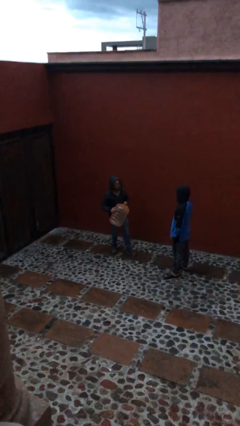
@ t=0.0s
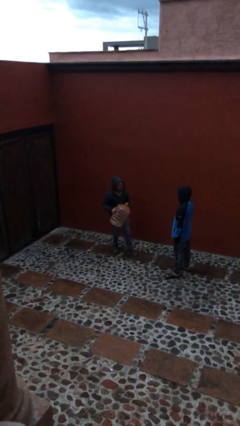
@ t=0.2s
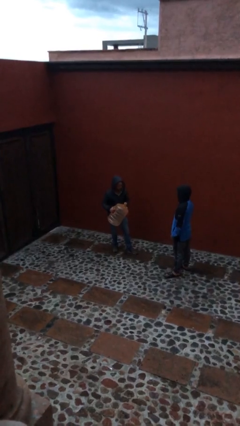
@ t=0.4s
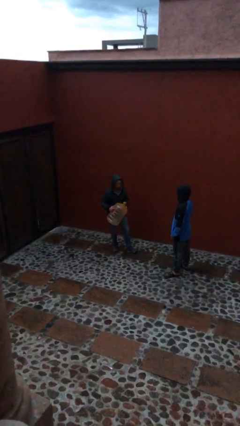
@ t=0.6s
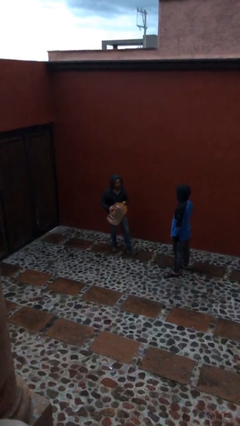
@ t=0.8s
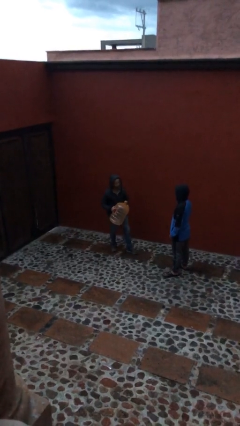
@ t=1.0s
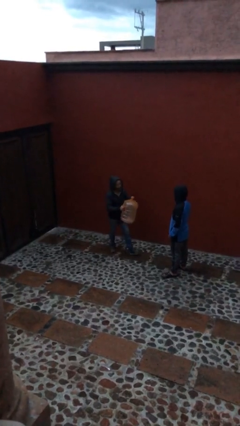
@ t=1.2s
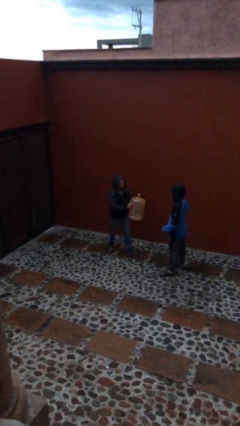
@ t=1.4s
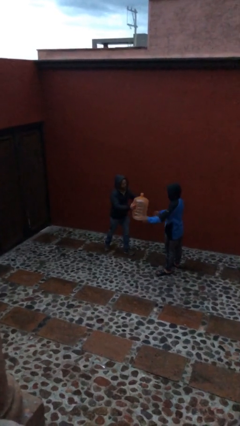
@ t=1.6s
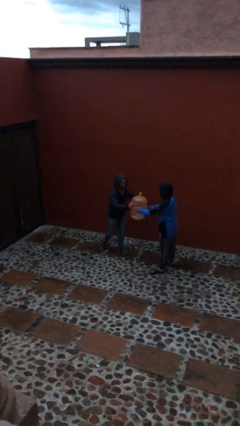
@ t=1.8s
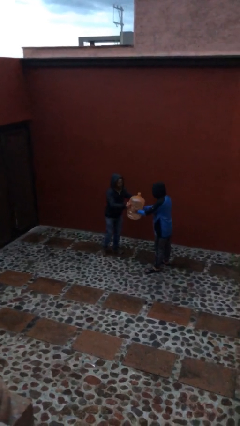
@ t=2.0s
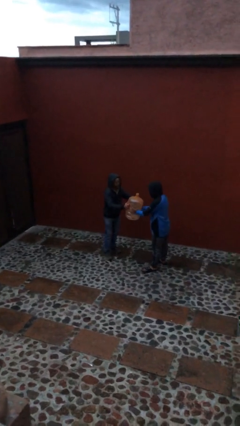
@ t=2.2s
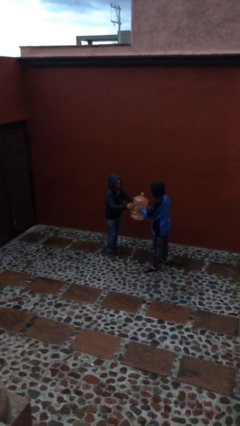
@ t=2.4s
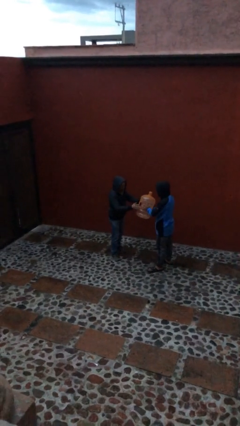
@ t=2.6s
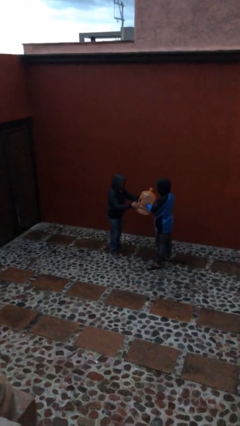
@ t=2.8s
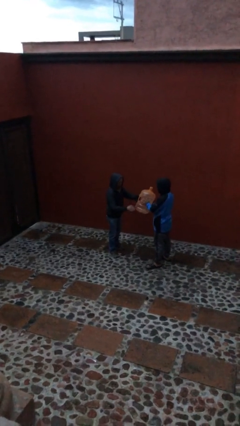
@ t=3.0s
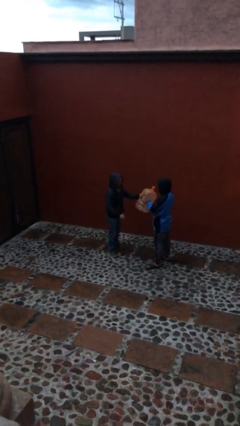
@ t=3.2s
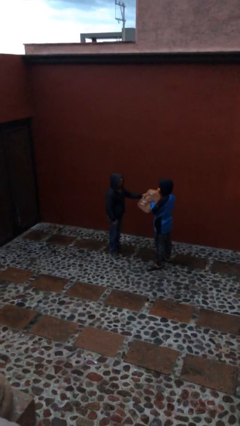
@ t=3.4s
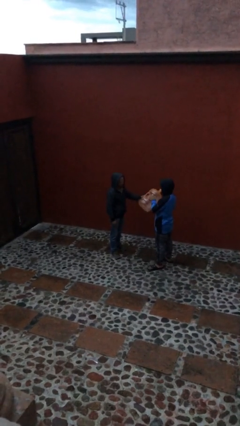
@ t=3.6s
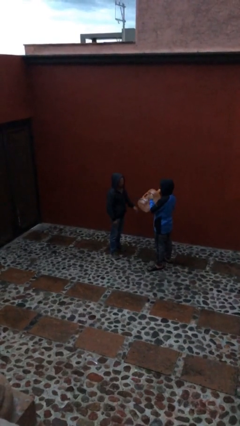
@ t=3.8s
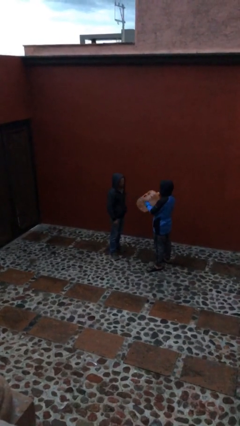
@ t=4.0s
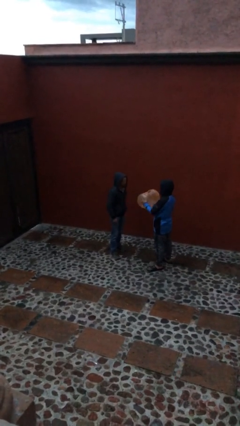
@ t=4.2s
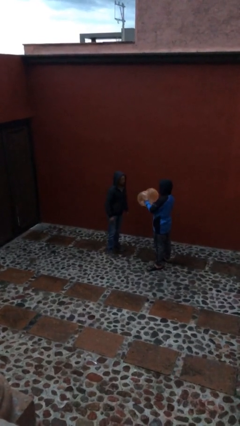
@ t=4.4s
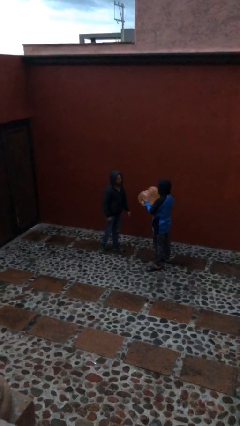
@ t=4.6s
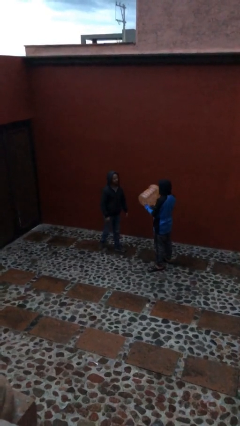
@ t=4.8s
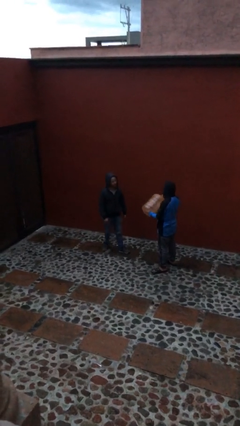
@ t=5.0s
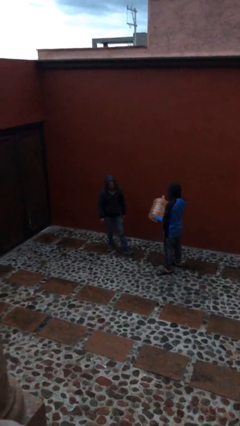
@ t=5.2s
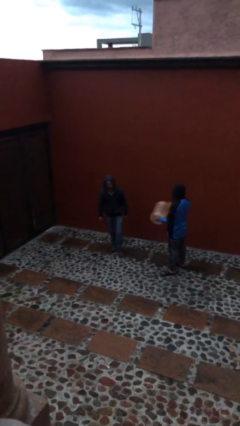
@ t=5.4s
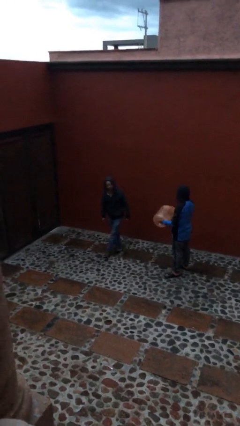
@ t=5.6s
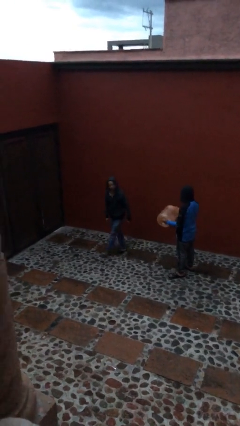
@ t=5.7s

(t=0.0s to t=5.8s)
person transfers object to person

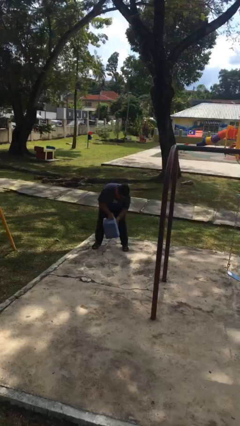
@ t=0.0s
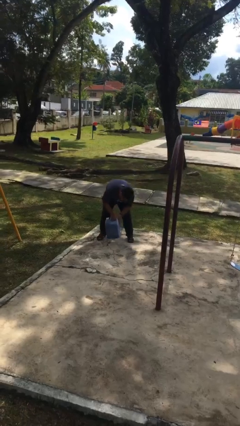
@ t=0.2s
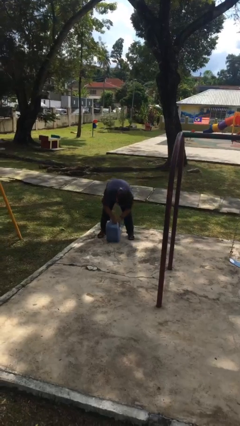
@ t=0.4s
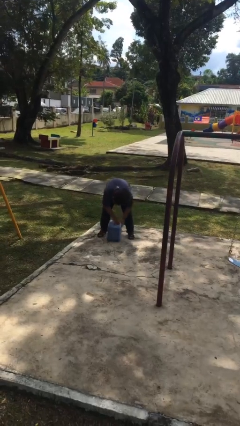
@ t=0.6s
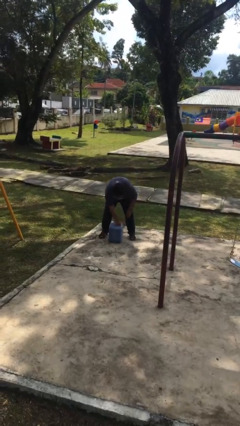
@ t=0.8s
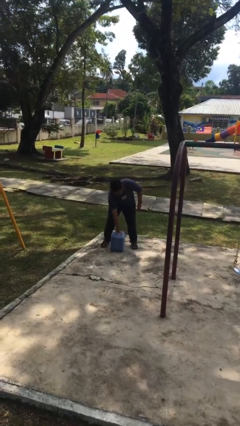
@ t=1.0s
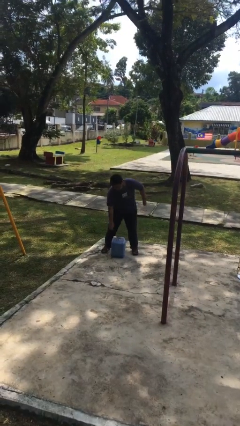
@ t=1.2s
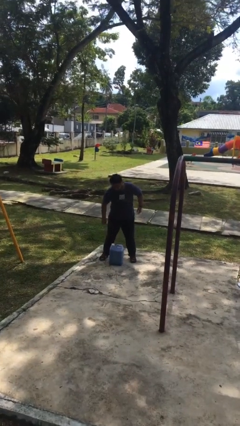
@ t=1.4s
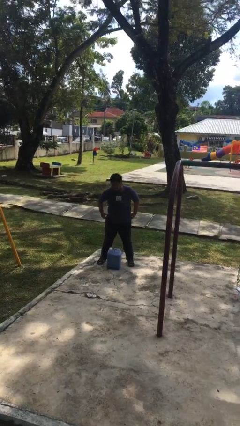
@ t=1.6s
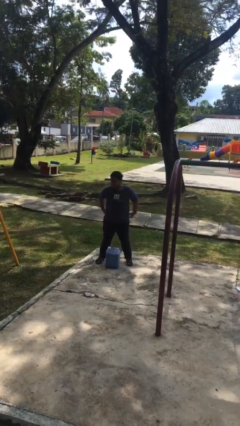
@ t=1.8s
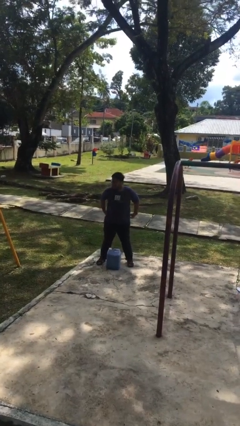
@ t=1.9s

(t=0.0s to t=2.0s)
person puts down object on floor

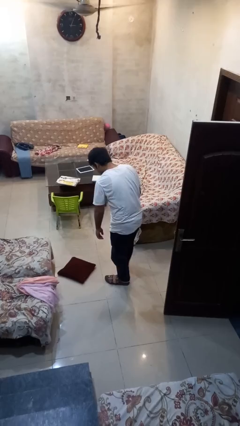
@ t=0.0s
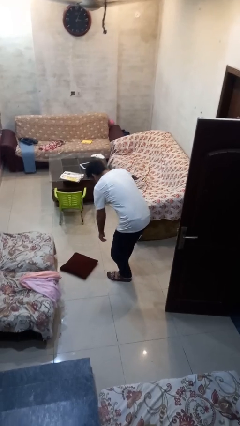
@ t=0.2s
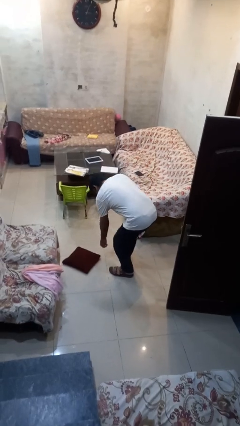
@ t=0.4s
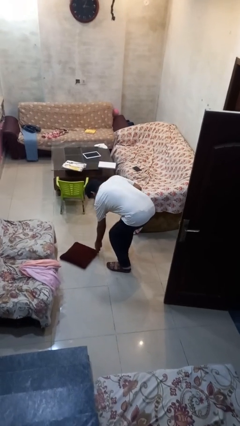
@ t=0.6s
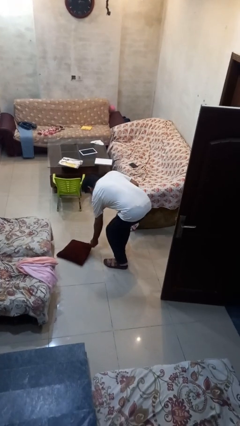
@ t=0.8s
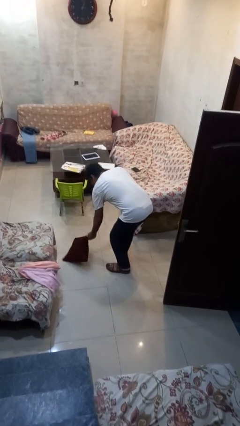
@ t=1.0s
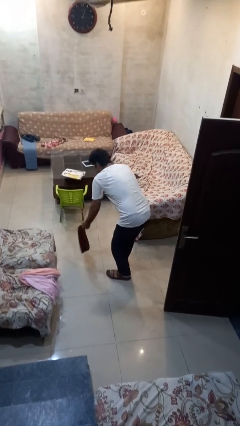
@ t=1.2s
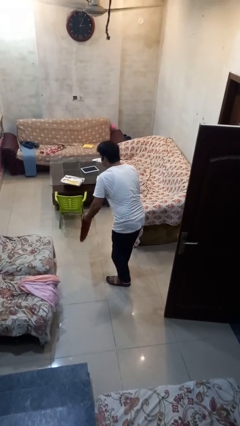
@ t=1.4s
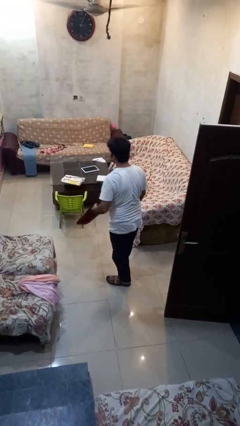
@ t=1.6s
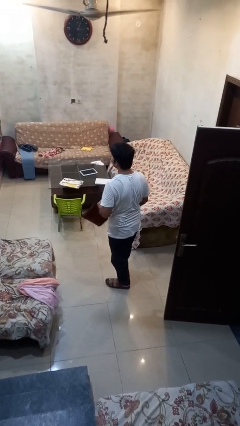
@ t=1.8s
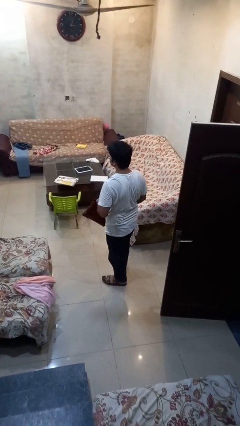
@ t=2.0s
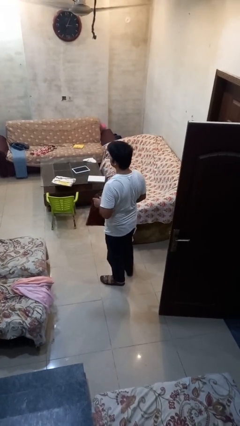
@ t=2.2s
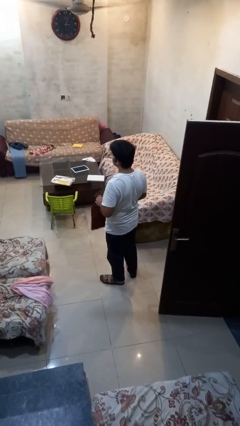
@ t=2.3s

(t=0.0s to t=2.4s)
person picks up object from floor

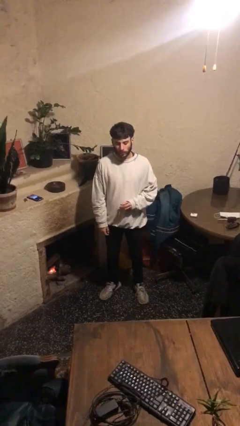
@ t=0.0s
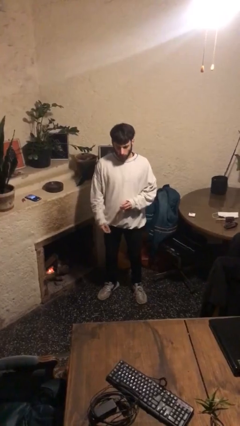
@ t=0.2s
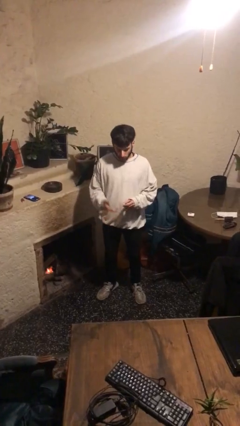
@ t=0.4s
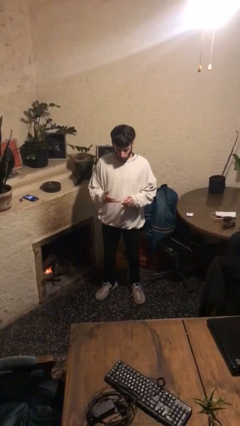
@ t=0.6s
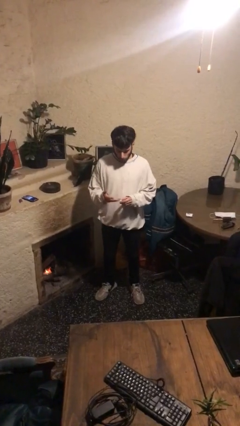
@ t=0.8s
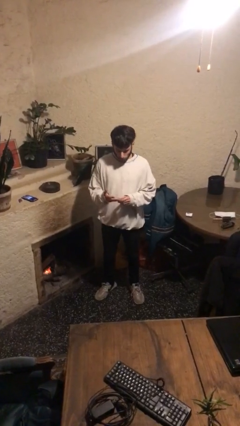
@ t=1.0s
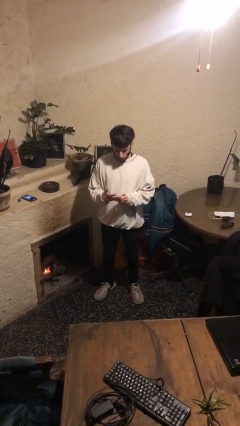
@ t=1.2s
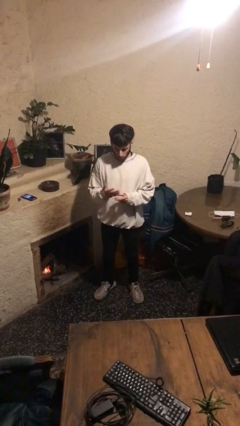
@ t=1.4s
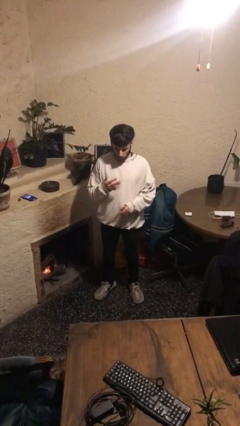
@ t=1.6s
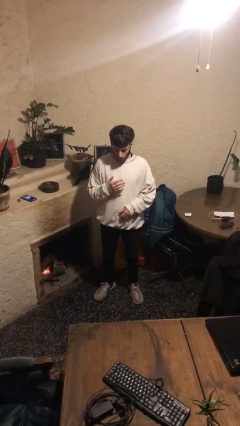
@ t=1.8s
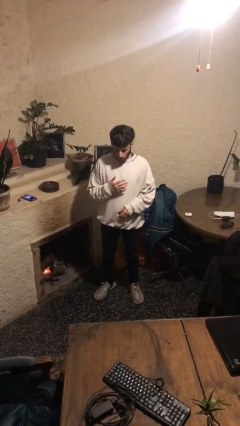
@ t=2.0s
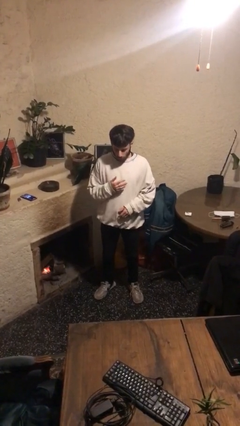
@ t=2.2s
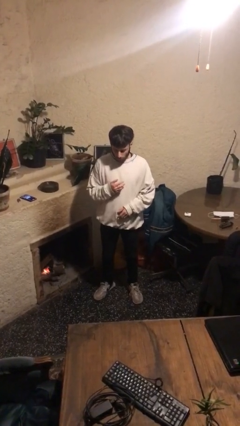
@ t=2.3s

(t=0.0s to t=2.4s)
person puts on ring

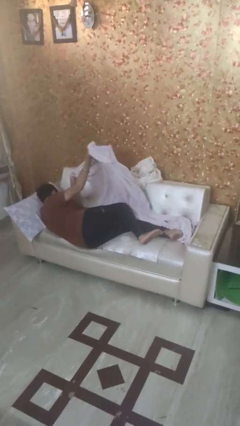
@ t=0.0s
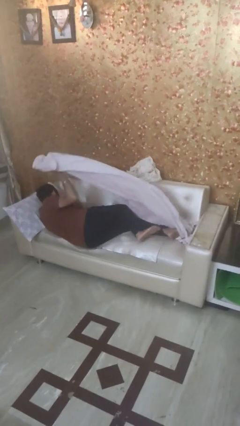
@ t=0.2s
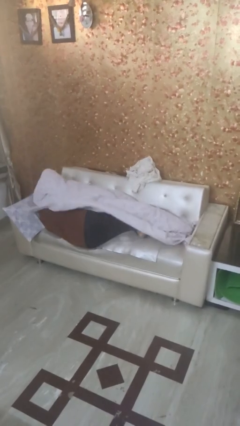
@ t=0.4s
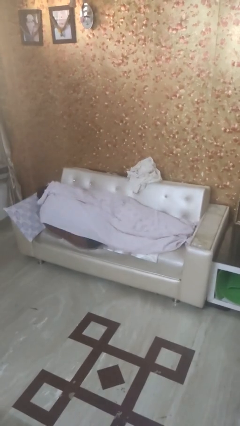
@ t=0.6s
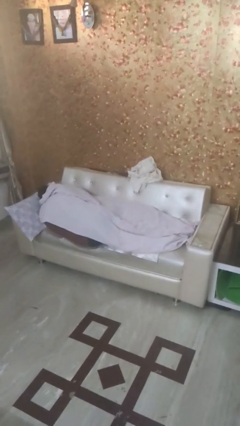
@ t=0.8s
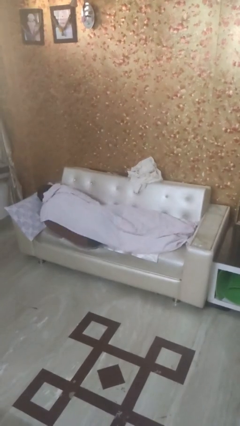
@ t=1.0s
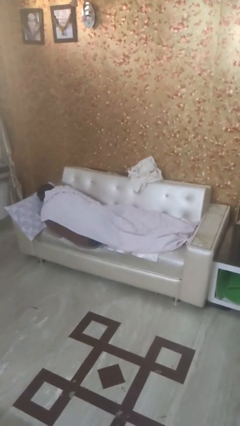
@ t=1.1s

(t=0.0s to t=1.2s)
person covers with bedsheets

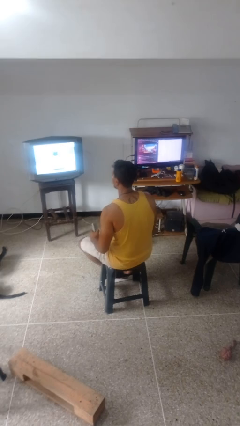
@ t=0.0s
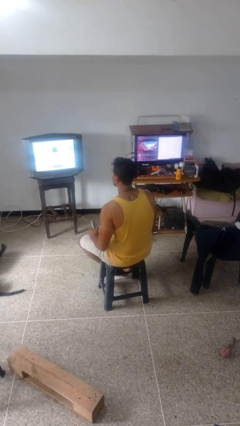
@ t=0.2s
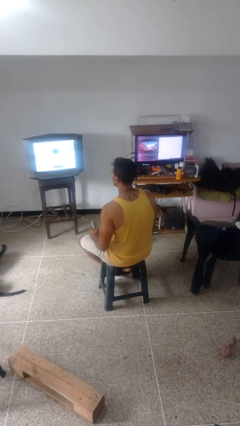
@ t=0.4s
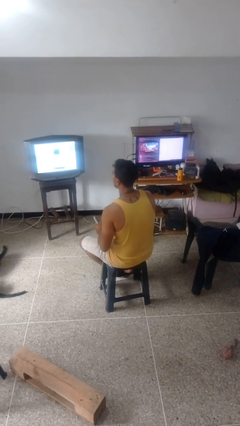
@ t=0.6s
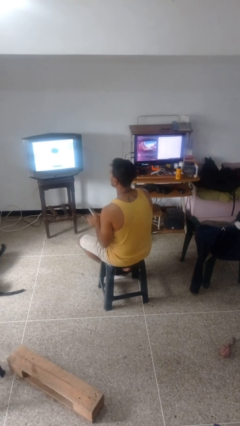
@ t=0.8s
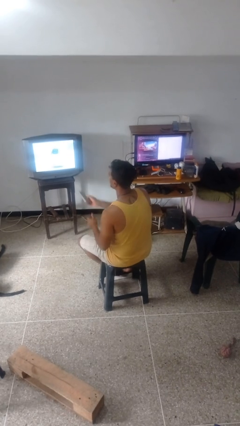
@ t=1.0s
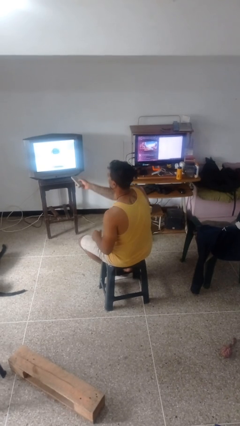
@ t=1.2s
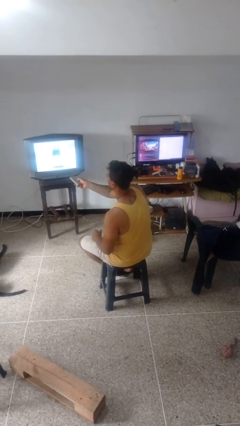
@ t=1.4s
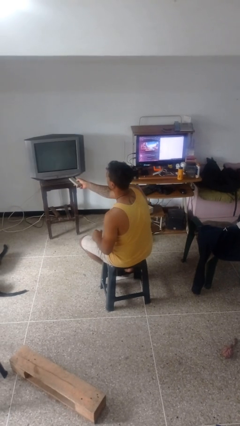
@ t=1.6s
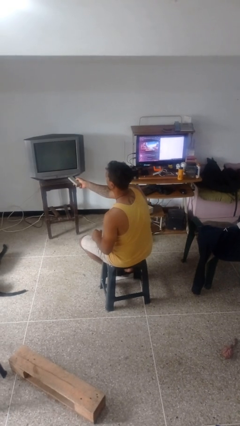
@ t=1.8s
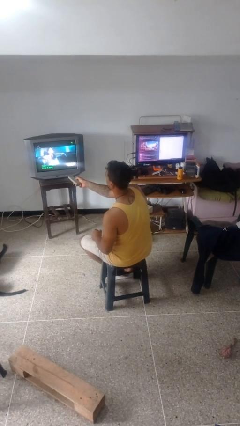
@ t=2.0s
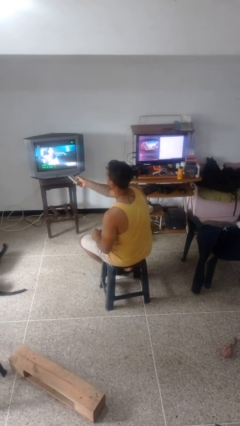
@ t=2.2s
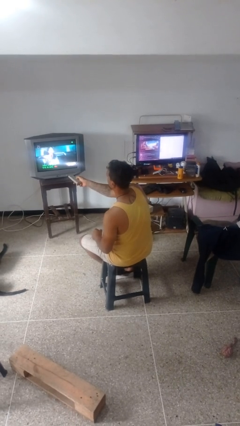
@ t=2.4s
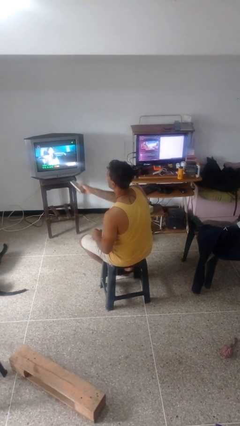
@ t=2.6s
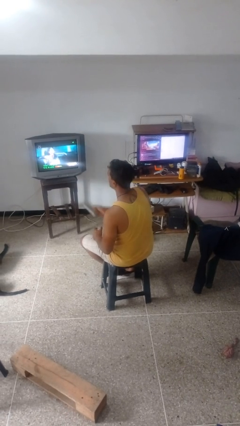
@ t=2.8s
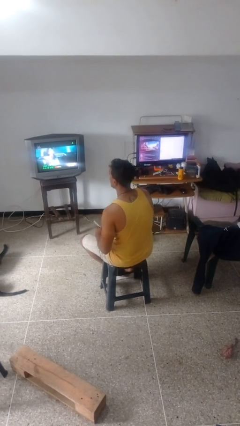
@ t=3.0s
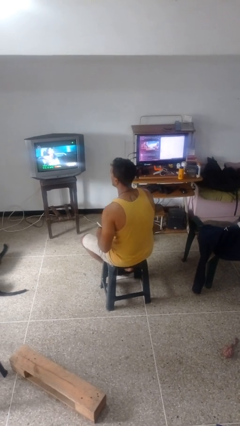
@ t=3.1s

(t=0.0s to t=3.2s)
person uses television remote
